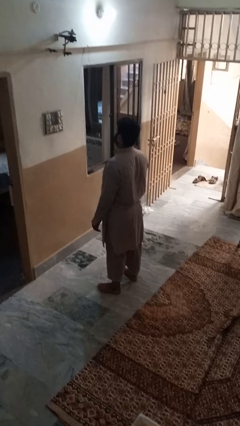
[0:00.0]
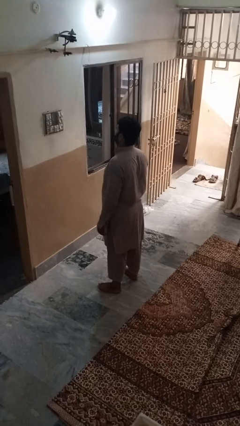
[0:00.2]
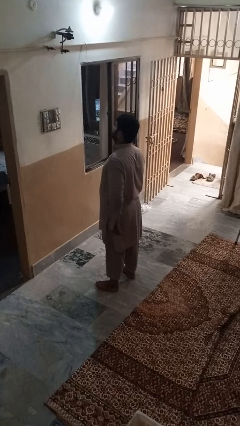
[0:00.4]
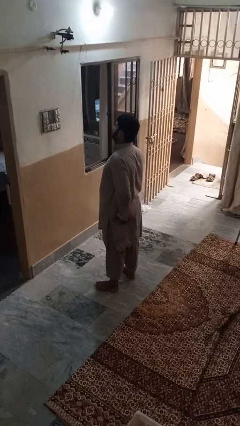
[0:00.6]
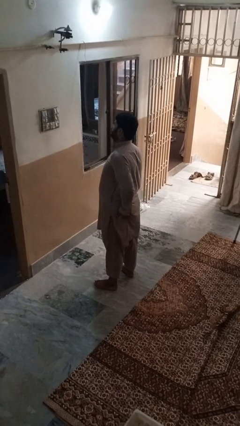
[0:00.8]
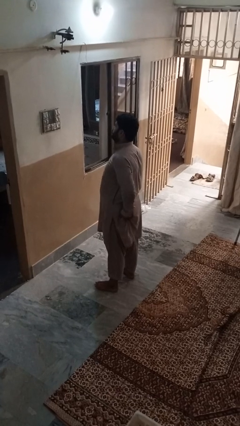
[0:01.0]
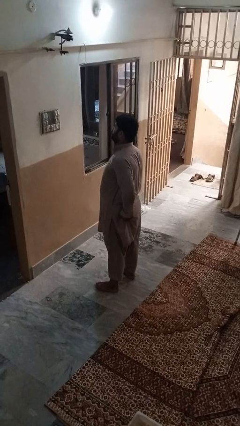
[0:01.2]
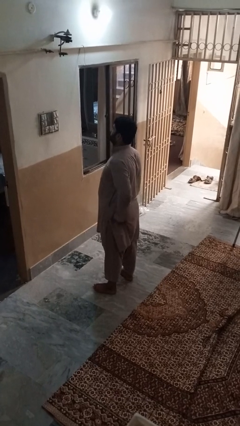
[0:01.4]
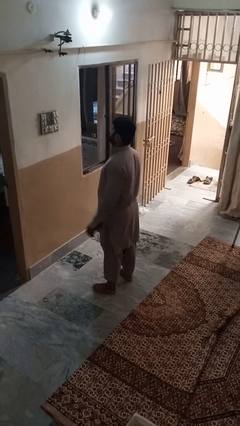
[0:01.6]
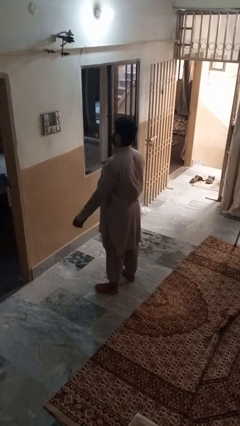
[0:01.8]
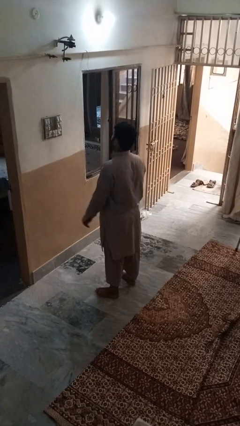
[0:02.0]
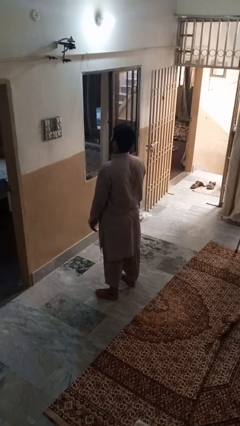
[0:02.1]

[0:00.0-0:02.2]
person wiggles hips

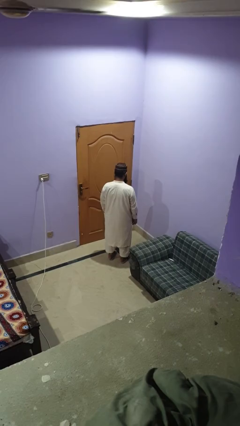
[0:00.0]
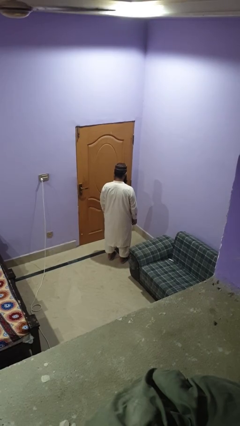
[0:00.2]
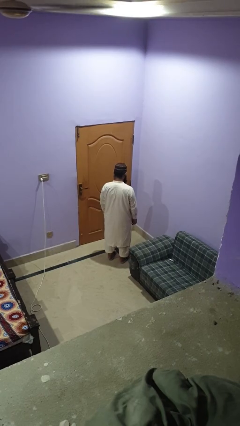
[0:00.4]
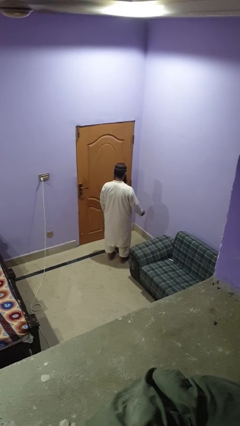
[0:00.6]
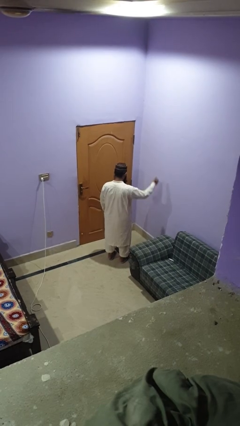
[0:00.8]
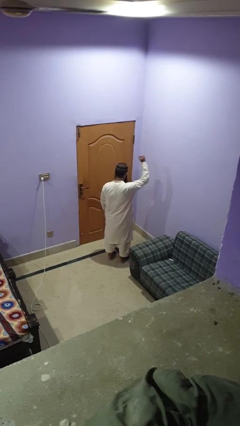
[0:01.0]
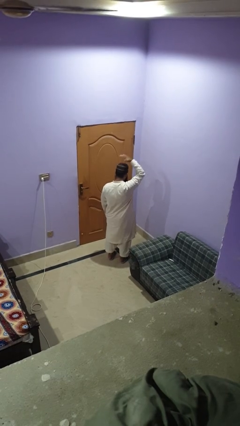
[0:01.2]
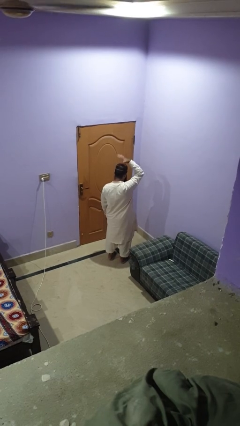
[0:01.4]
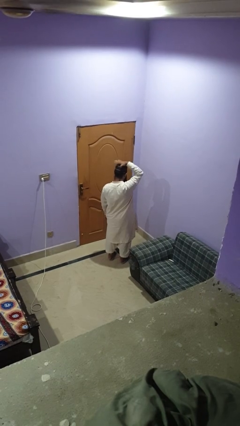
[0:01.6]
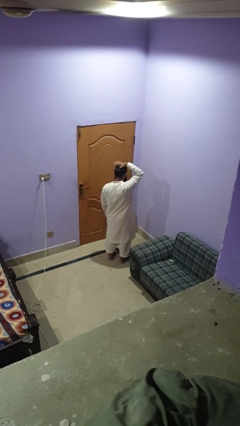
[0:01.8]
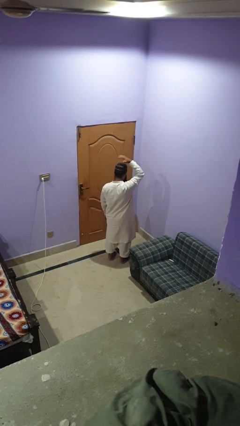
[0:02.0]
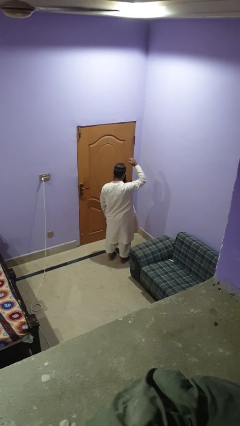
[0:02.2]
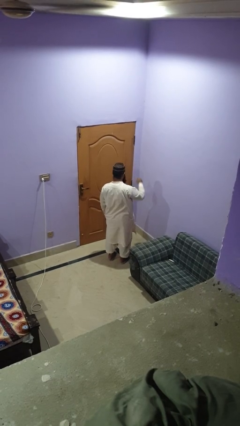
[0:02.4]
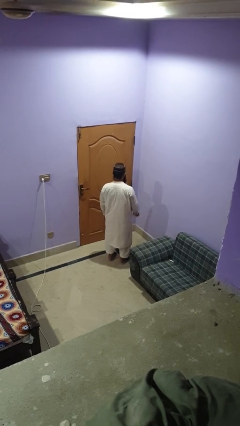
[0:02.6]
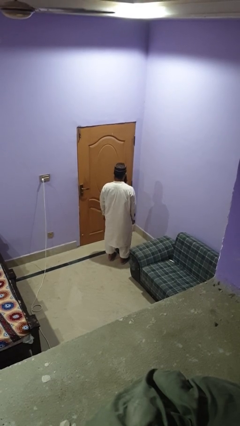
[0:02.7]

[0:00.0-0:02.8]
person pats head

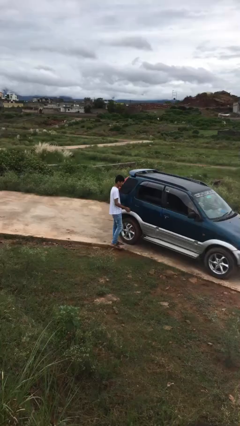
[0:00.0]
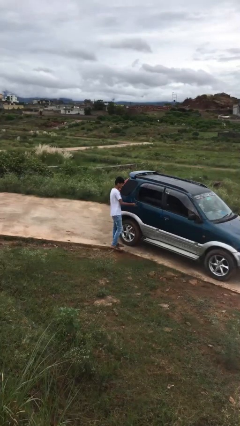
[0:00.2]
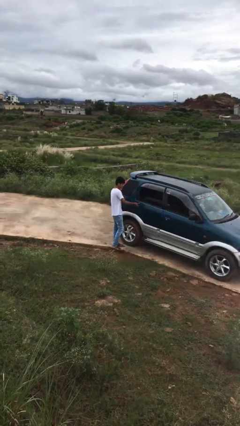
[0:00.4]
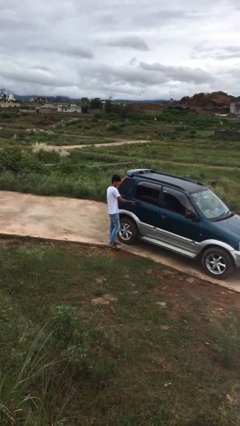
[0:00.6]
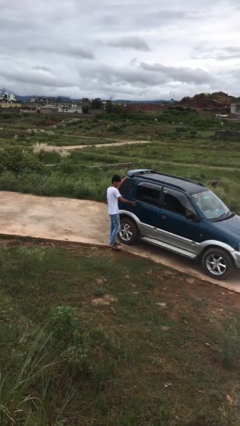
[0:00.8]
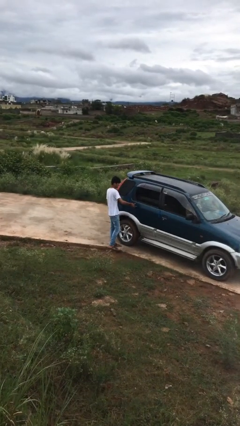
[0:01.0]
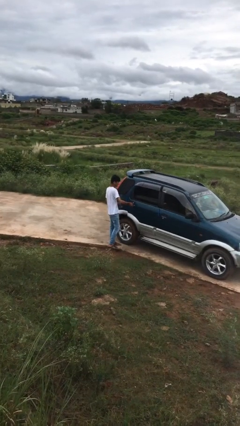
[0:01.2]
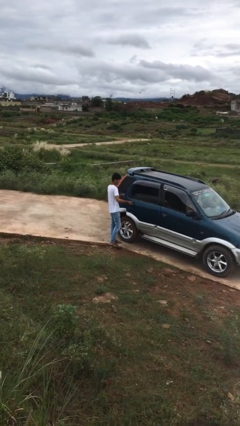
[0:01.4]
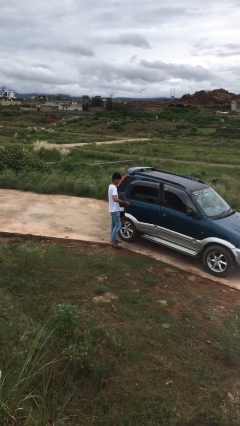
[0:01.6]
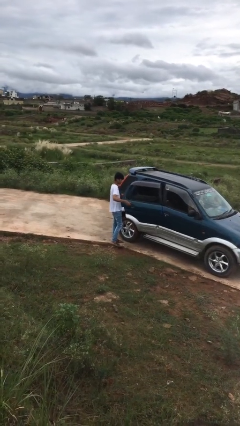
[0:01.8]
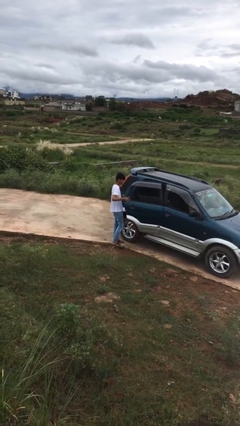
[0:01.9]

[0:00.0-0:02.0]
person opens car door

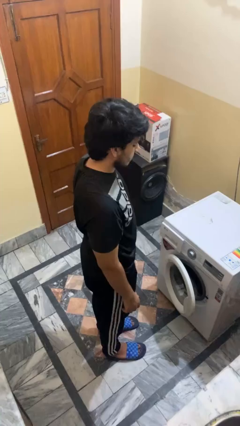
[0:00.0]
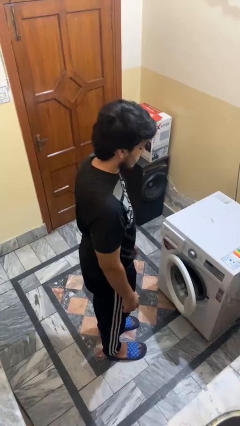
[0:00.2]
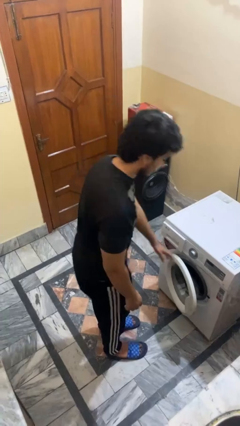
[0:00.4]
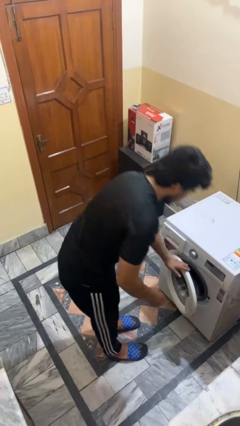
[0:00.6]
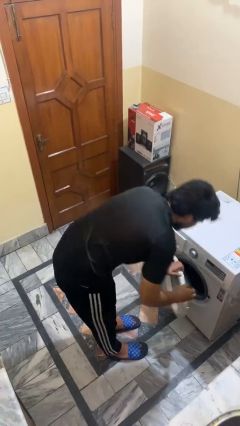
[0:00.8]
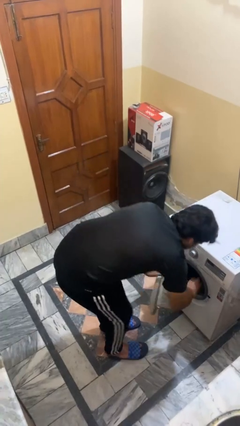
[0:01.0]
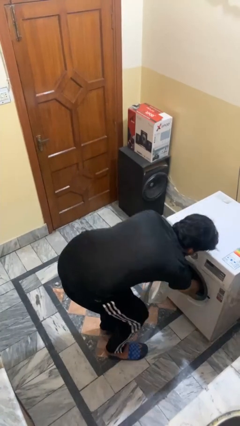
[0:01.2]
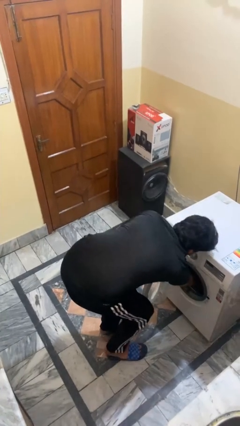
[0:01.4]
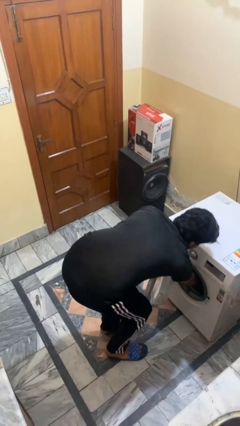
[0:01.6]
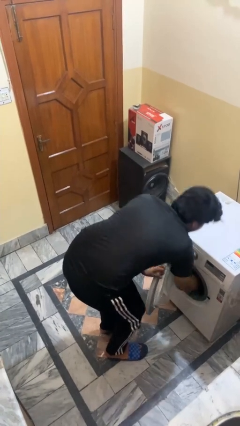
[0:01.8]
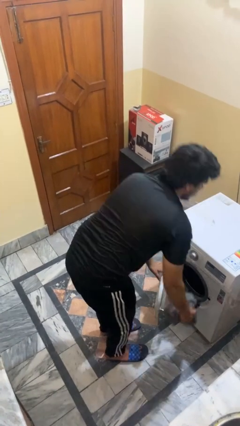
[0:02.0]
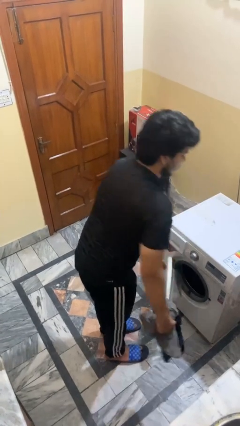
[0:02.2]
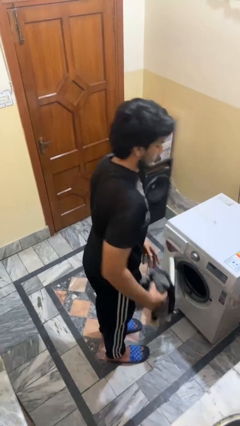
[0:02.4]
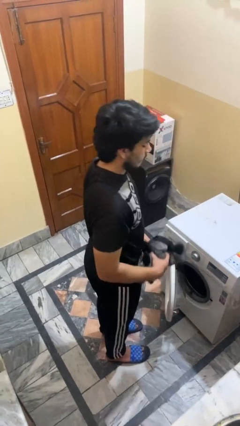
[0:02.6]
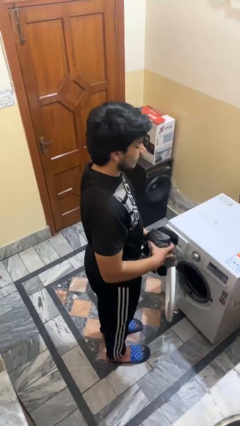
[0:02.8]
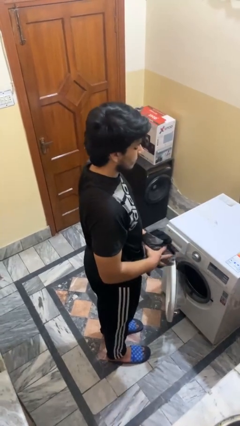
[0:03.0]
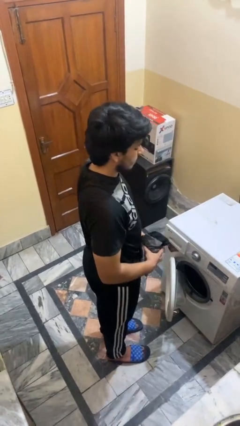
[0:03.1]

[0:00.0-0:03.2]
person unloads dryer

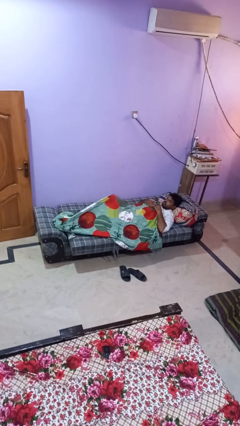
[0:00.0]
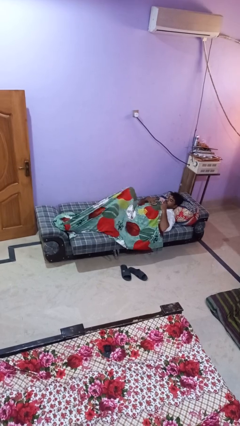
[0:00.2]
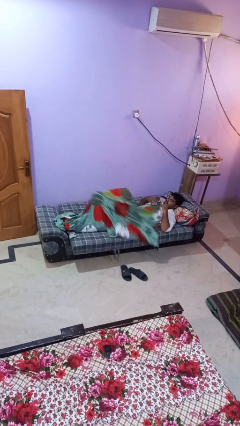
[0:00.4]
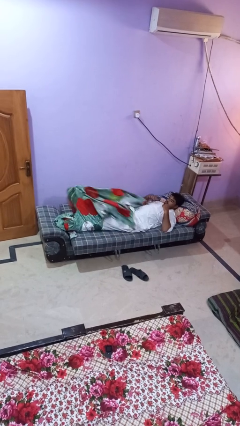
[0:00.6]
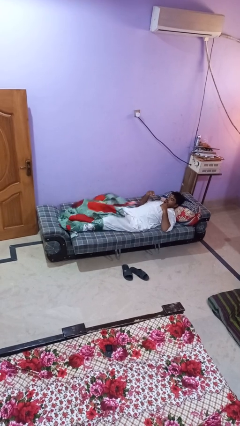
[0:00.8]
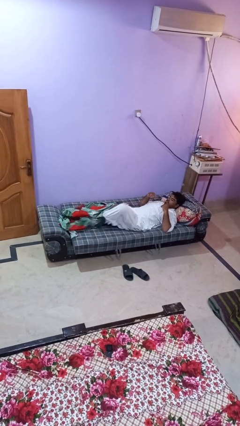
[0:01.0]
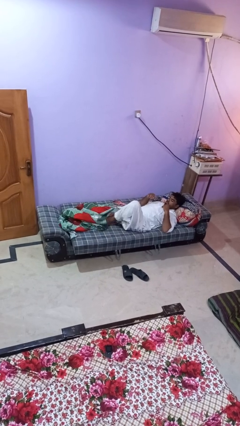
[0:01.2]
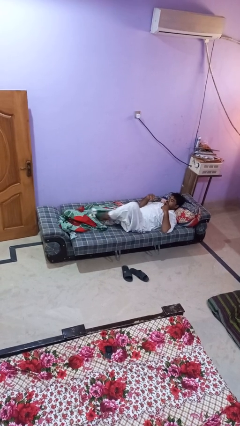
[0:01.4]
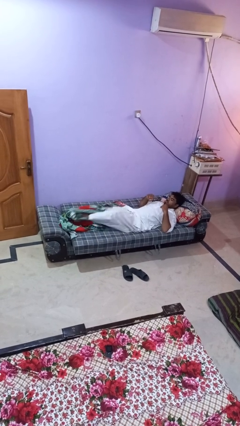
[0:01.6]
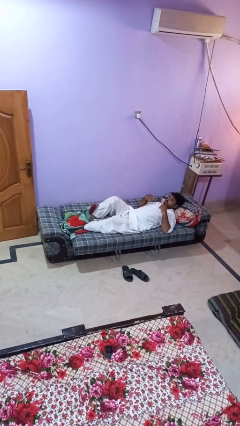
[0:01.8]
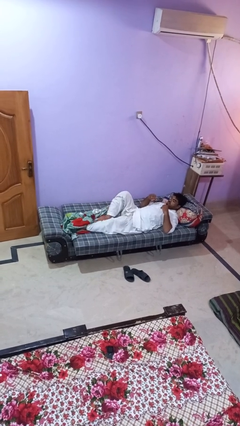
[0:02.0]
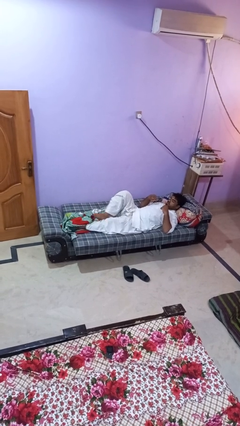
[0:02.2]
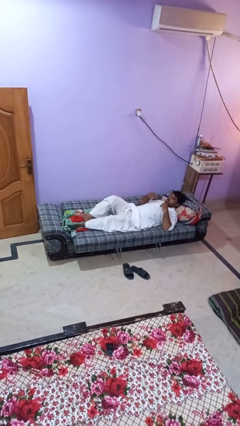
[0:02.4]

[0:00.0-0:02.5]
person uncovers with bedsheets

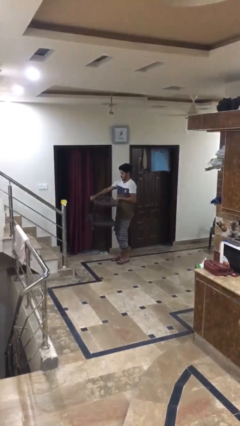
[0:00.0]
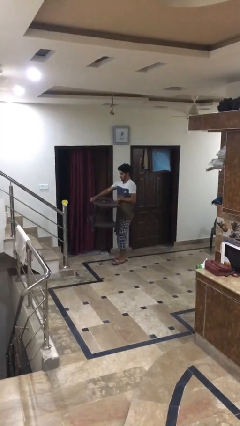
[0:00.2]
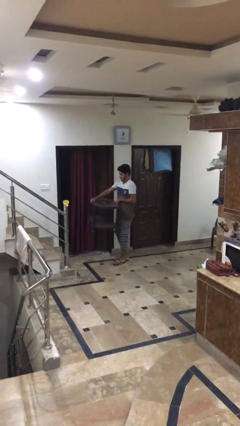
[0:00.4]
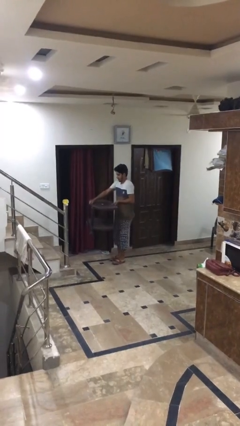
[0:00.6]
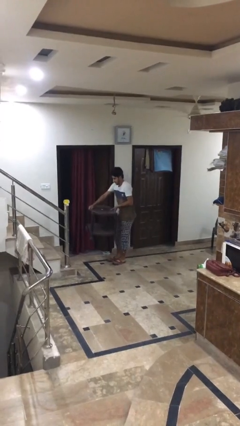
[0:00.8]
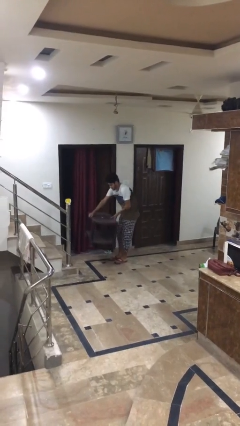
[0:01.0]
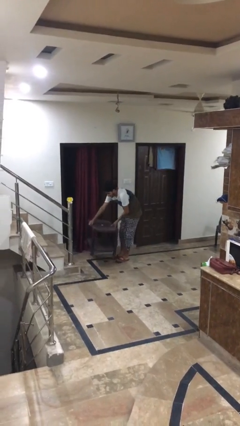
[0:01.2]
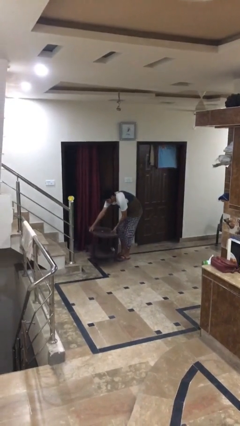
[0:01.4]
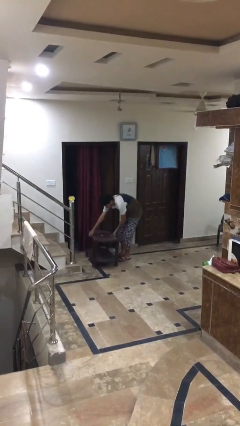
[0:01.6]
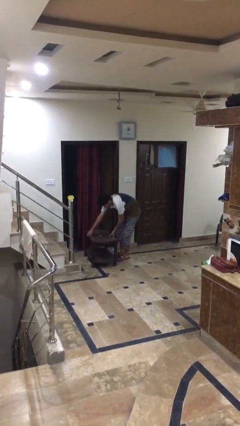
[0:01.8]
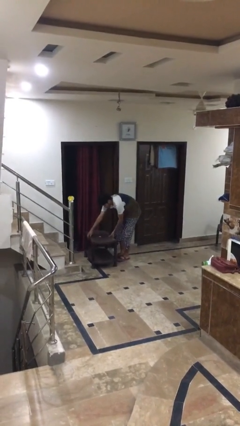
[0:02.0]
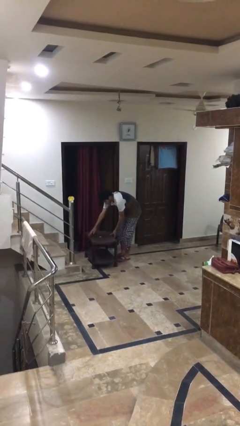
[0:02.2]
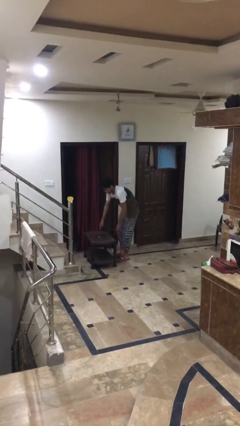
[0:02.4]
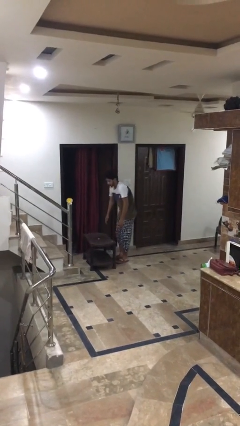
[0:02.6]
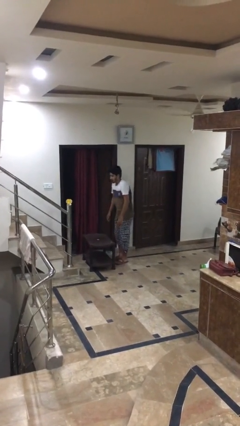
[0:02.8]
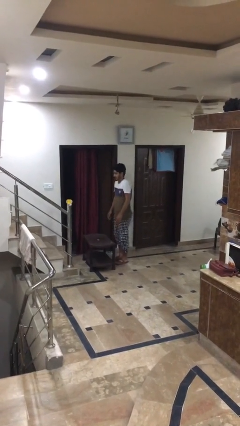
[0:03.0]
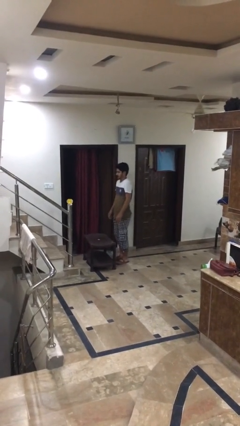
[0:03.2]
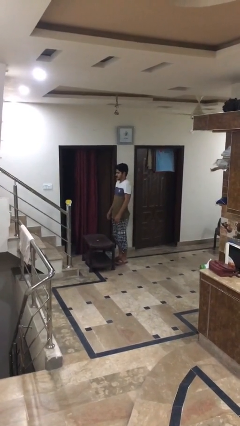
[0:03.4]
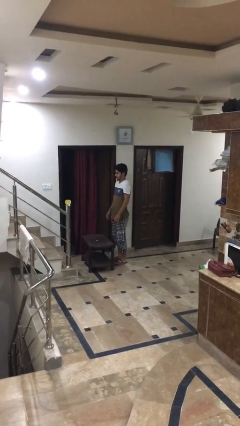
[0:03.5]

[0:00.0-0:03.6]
person puts down object on floor

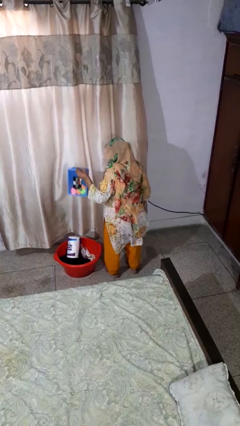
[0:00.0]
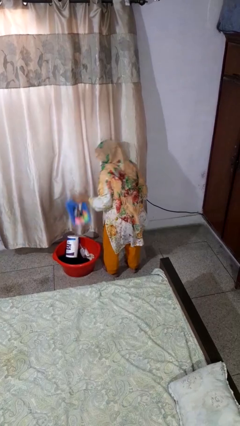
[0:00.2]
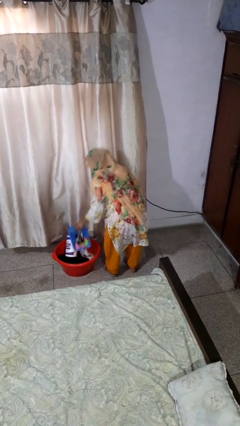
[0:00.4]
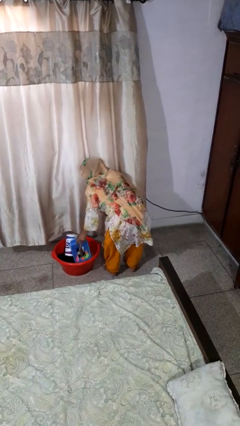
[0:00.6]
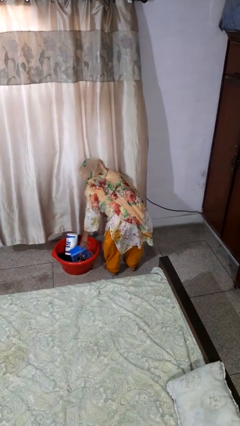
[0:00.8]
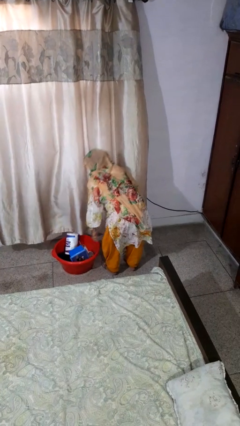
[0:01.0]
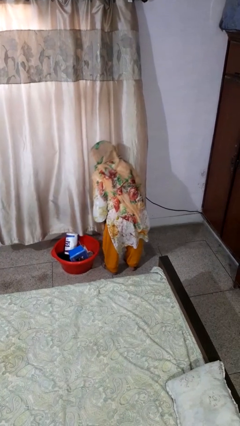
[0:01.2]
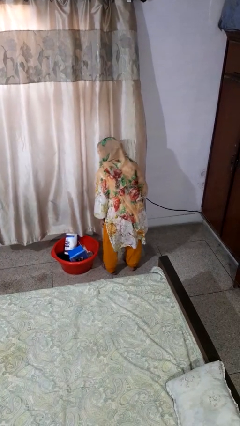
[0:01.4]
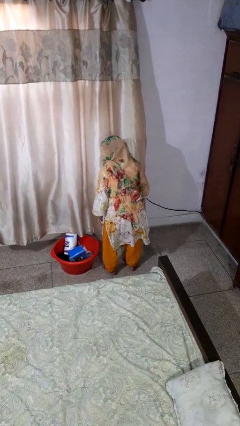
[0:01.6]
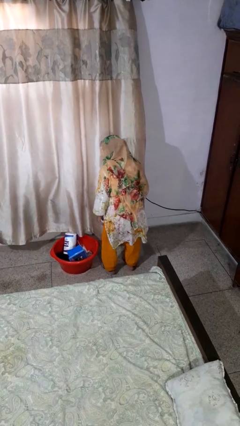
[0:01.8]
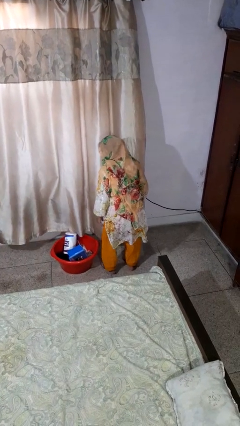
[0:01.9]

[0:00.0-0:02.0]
person puts object into basket
